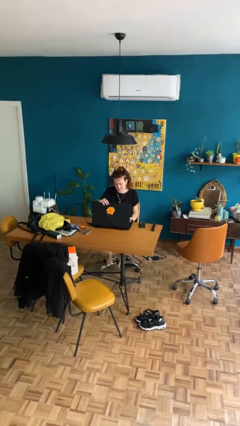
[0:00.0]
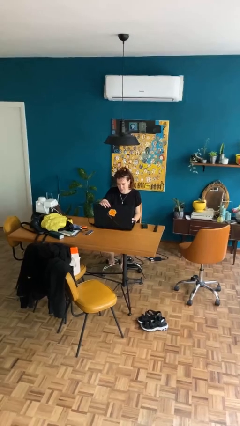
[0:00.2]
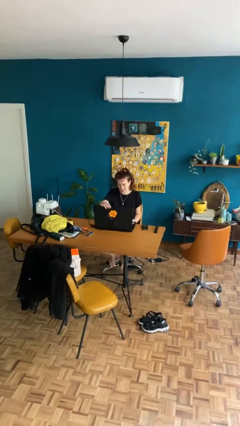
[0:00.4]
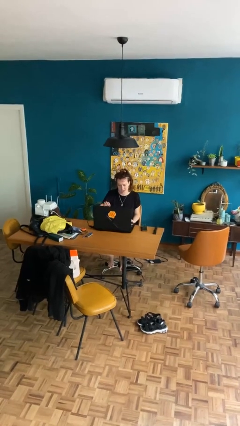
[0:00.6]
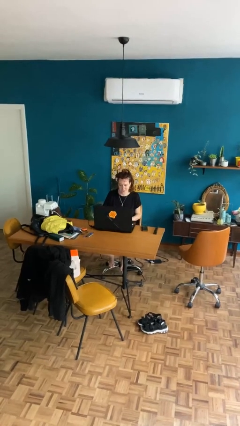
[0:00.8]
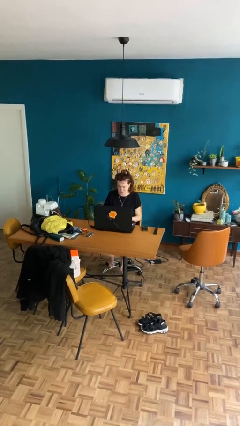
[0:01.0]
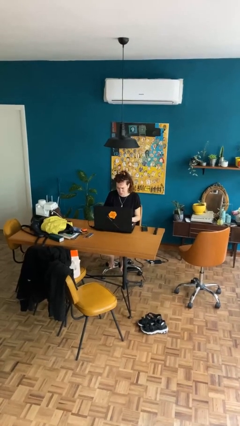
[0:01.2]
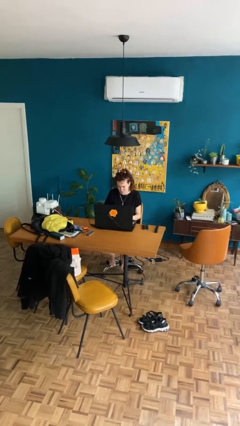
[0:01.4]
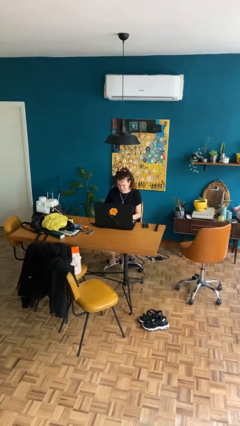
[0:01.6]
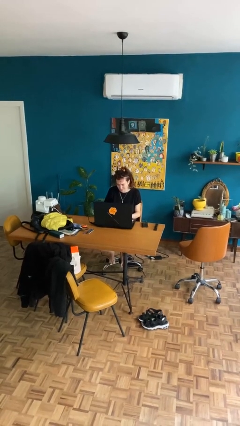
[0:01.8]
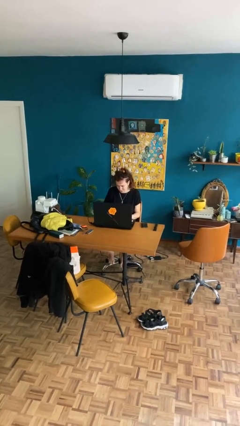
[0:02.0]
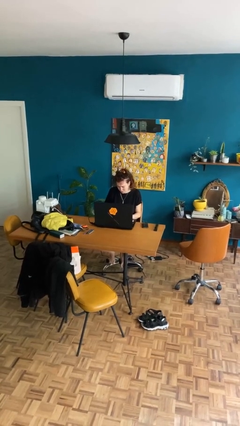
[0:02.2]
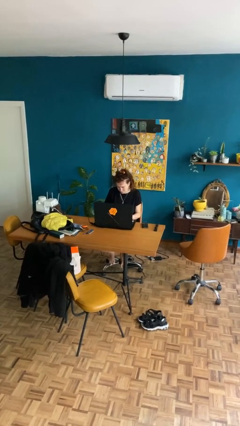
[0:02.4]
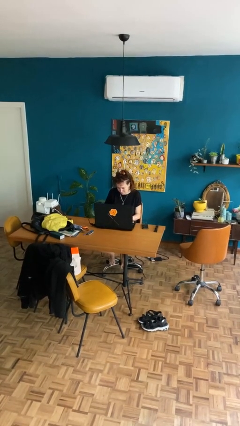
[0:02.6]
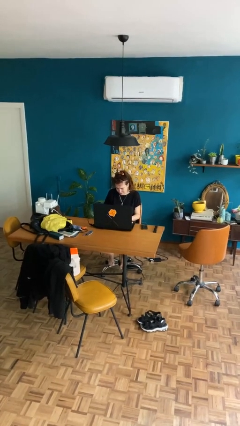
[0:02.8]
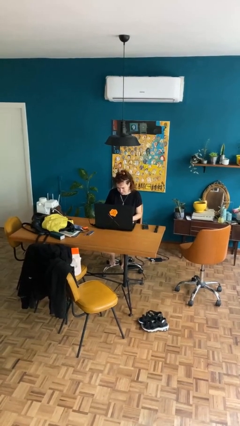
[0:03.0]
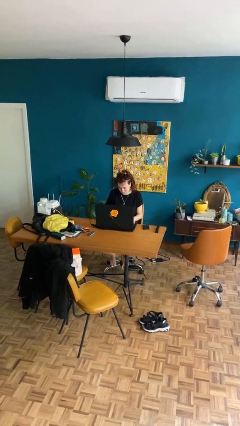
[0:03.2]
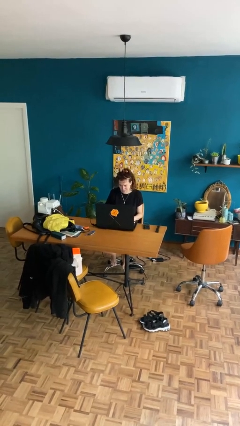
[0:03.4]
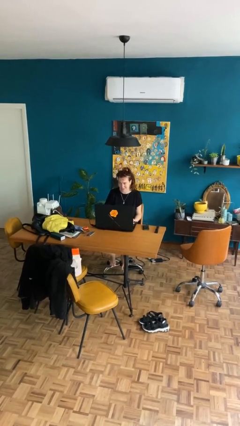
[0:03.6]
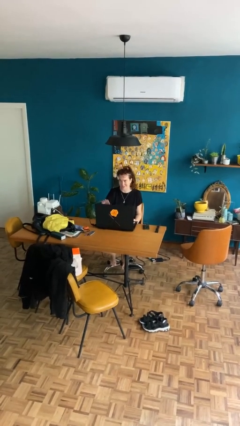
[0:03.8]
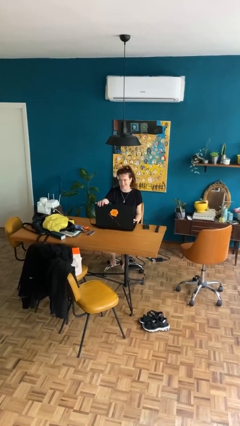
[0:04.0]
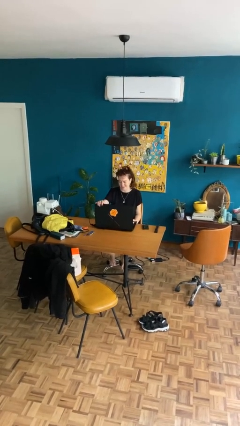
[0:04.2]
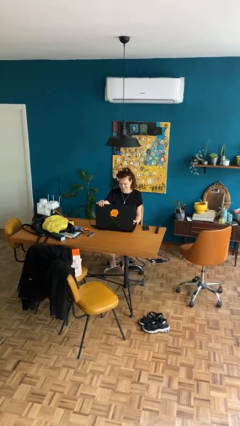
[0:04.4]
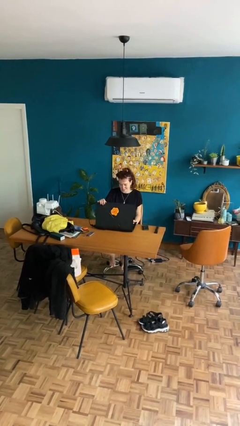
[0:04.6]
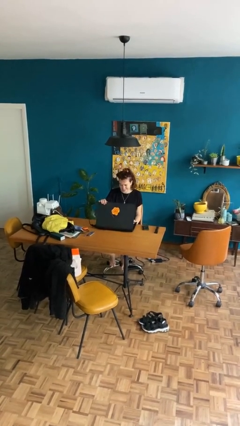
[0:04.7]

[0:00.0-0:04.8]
person interacts with laptop

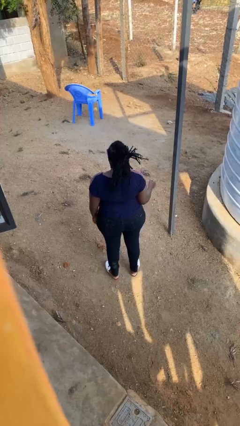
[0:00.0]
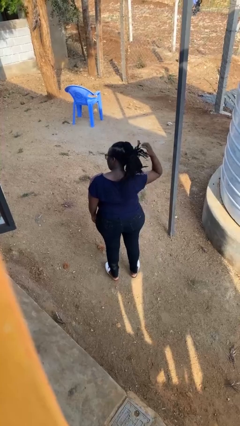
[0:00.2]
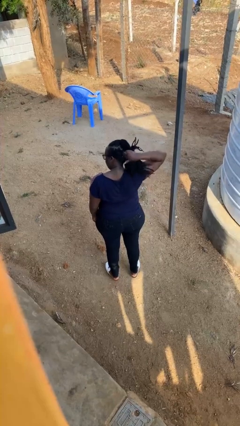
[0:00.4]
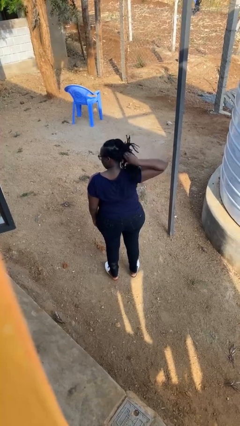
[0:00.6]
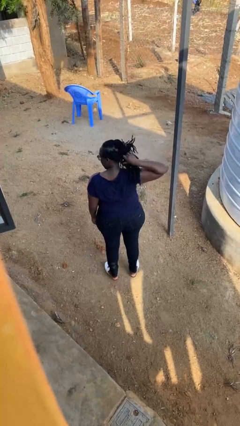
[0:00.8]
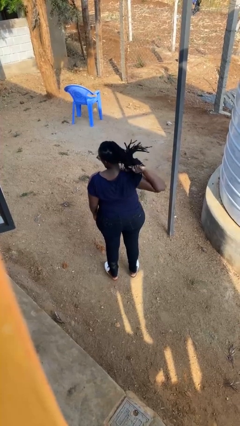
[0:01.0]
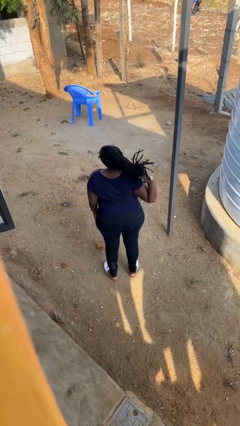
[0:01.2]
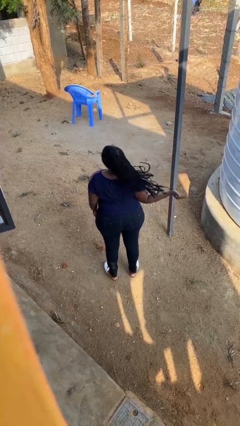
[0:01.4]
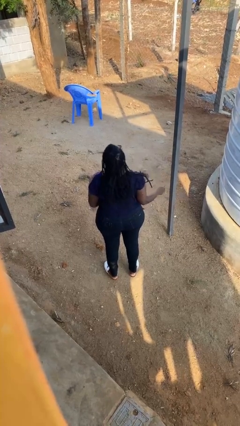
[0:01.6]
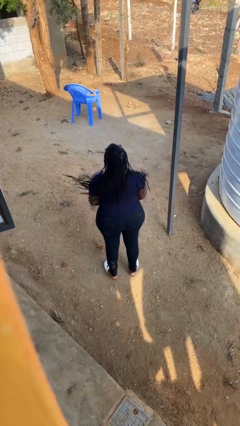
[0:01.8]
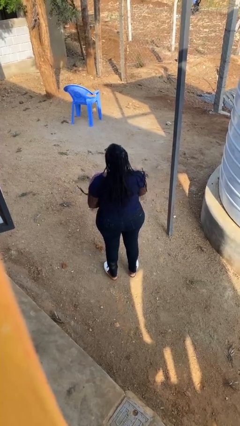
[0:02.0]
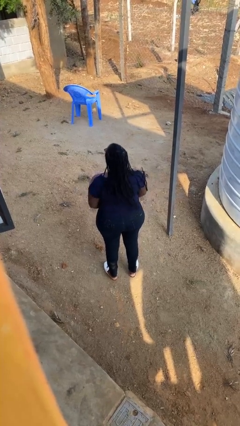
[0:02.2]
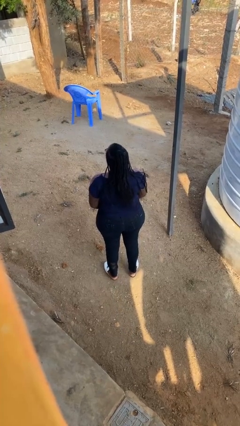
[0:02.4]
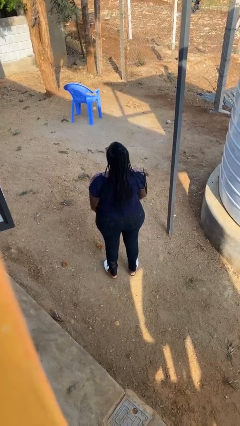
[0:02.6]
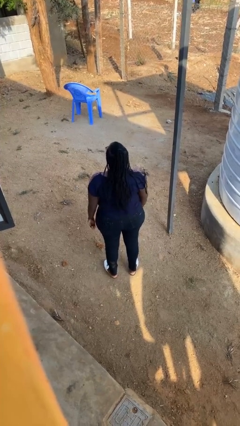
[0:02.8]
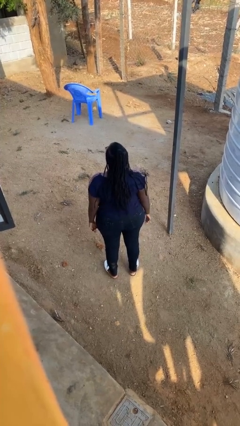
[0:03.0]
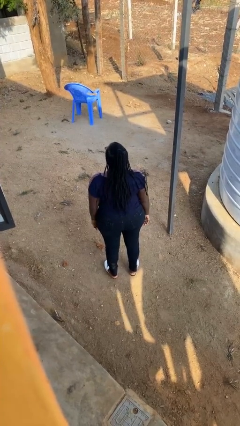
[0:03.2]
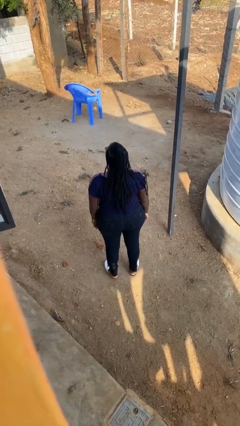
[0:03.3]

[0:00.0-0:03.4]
person takes off hairtie

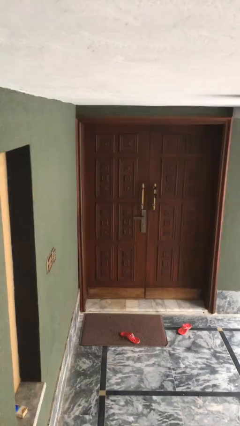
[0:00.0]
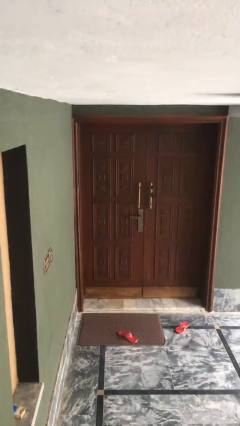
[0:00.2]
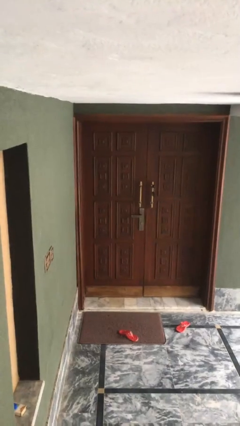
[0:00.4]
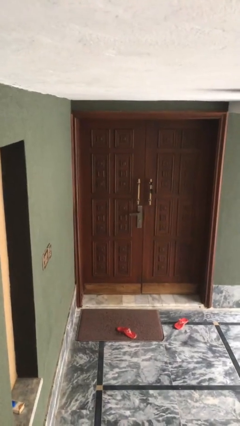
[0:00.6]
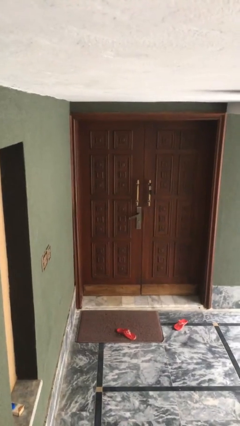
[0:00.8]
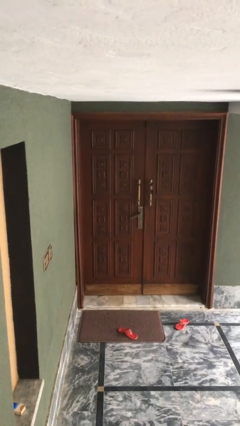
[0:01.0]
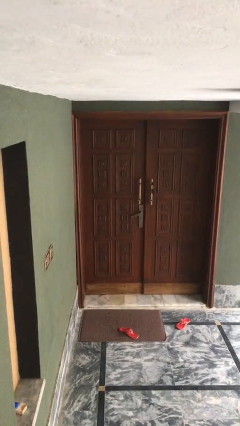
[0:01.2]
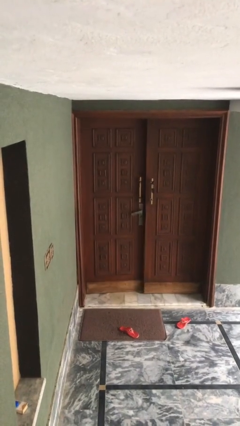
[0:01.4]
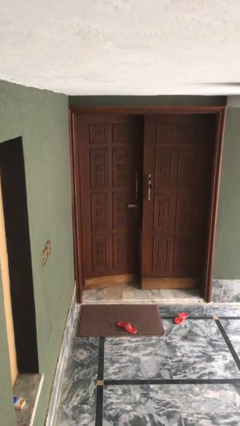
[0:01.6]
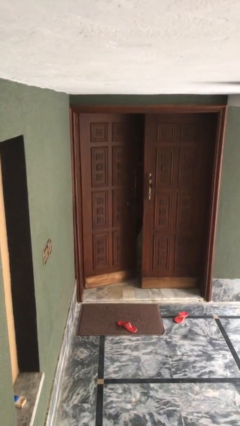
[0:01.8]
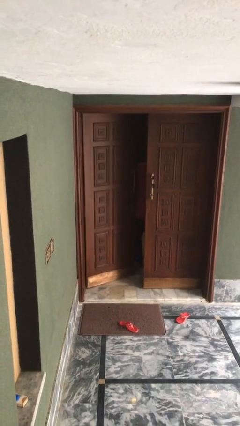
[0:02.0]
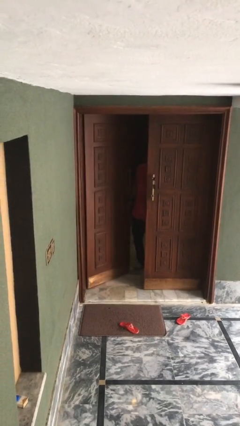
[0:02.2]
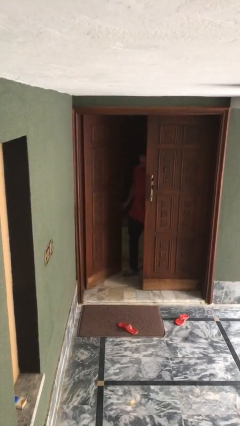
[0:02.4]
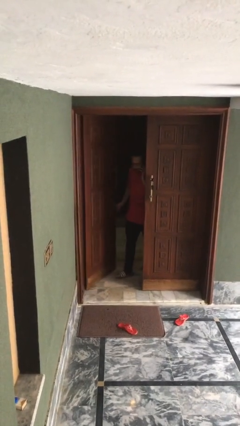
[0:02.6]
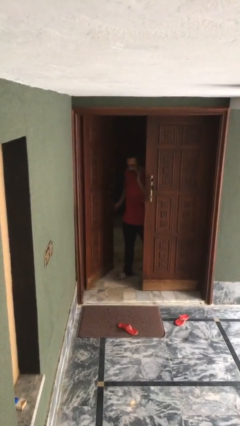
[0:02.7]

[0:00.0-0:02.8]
person opens facility door

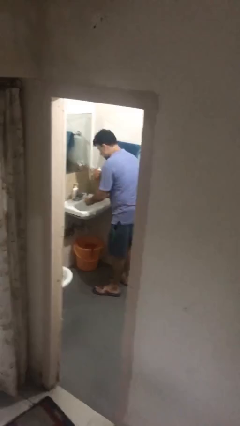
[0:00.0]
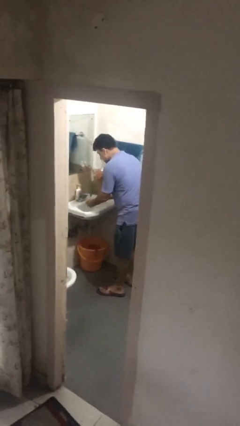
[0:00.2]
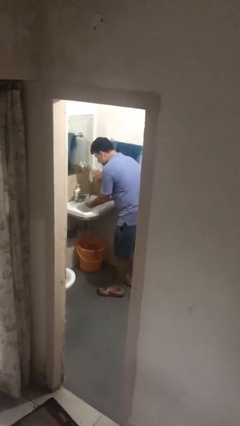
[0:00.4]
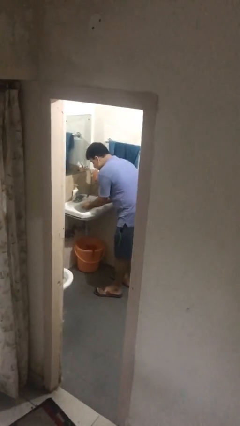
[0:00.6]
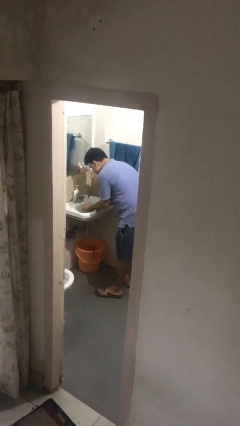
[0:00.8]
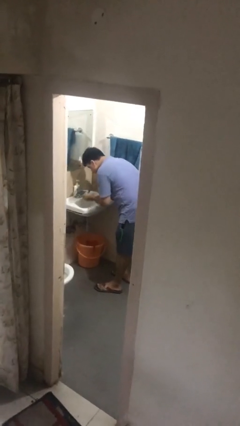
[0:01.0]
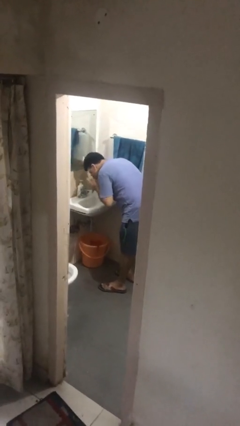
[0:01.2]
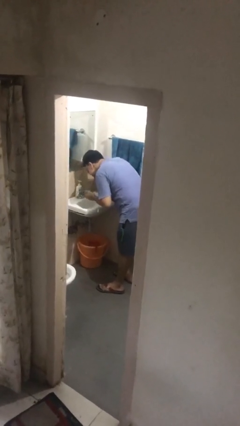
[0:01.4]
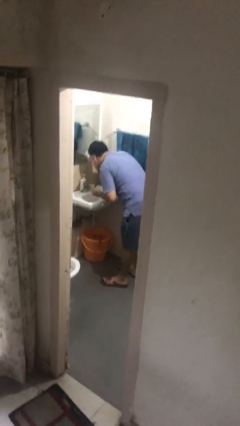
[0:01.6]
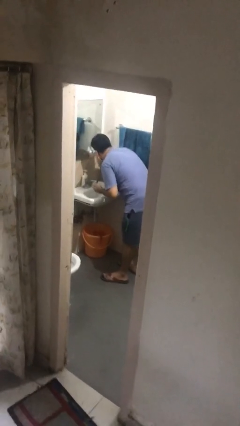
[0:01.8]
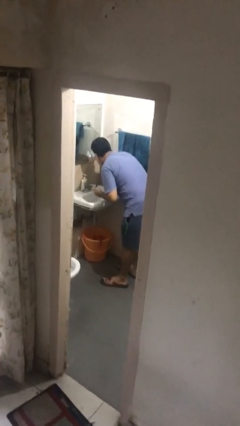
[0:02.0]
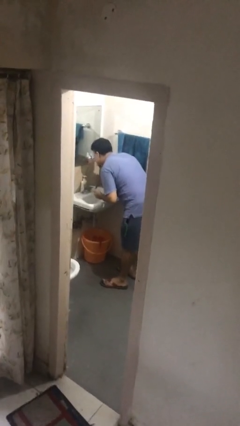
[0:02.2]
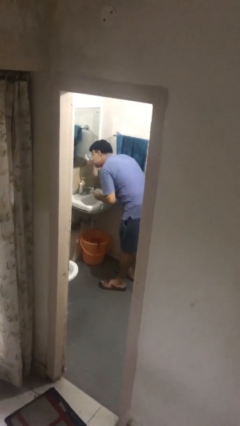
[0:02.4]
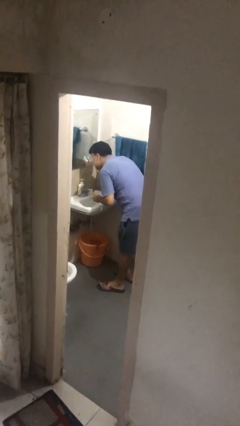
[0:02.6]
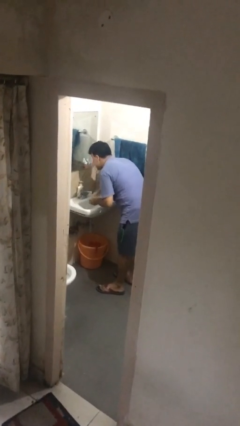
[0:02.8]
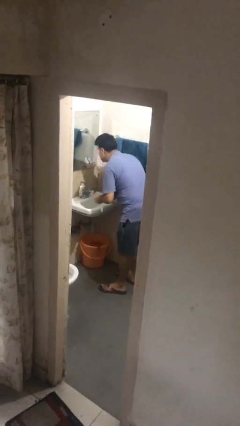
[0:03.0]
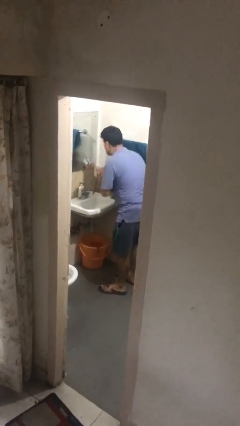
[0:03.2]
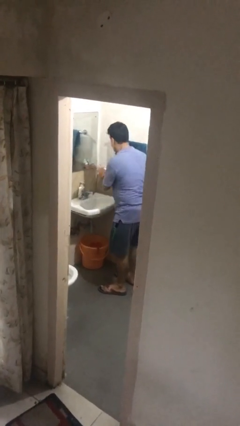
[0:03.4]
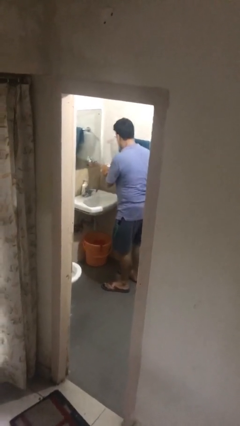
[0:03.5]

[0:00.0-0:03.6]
person washes face

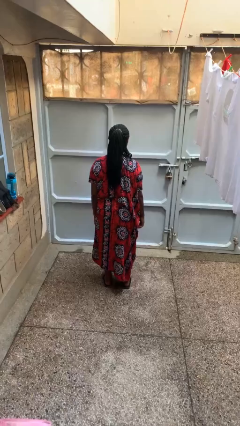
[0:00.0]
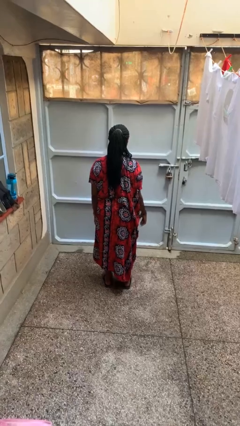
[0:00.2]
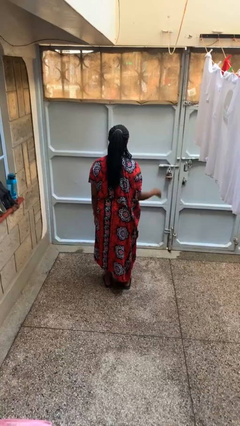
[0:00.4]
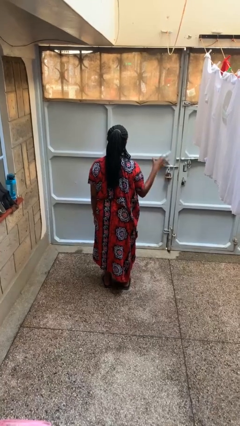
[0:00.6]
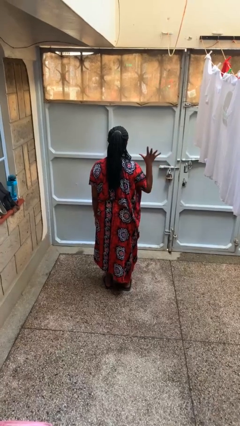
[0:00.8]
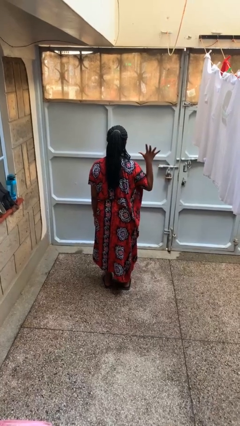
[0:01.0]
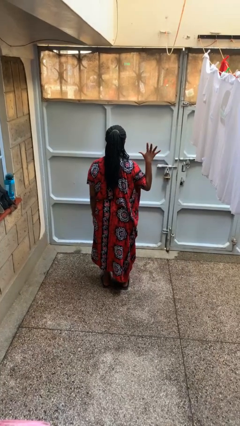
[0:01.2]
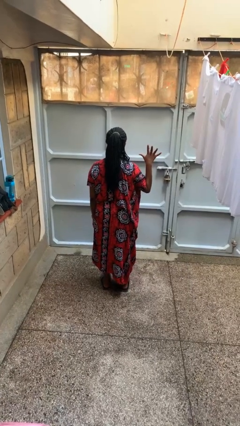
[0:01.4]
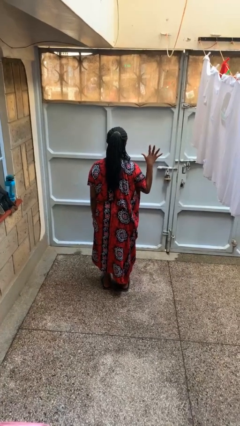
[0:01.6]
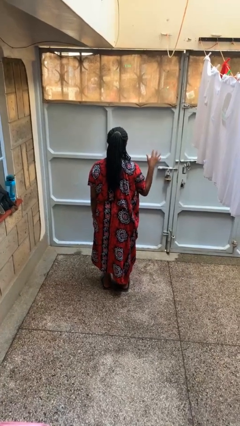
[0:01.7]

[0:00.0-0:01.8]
person gestures number five

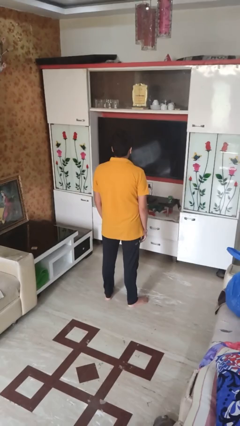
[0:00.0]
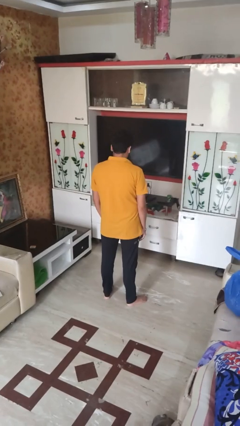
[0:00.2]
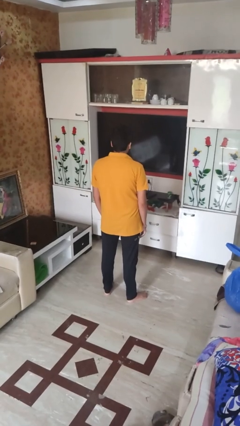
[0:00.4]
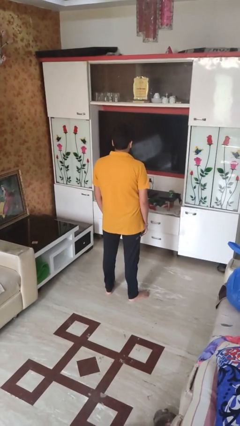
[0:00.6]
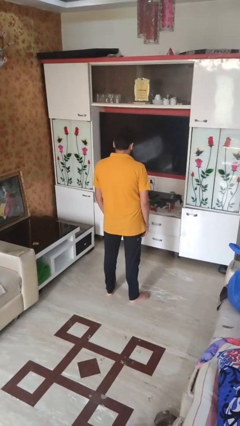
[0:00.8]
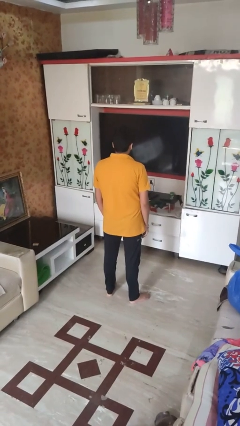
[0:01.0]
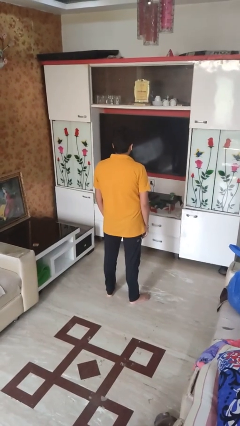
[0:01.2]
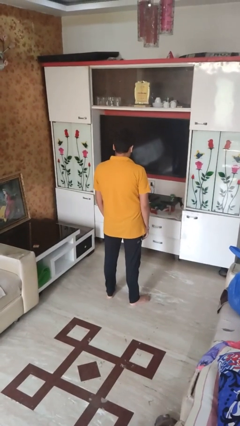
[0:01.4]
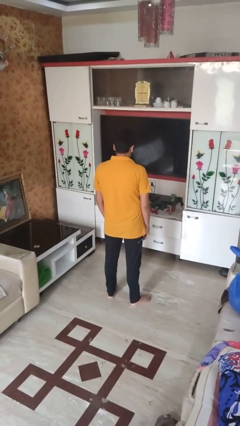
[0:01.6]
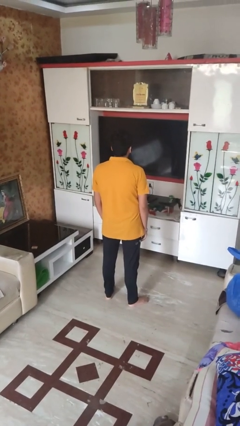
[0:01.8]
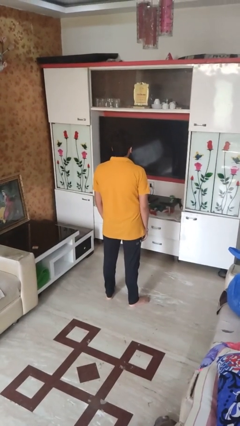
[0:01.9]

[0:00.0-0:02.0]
person nods head
